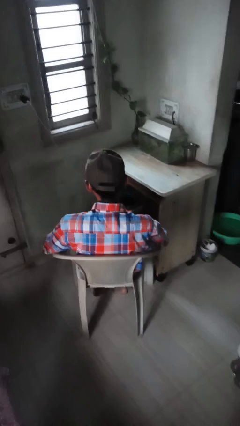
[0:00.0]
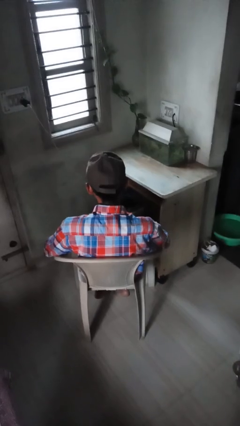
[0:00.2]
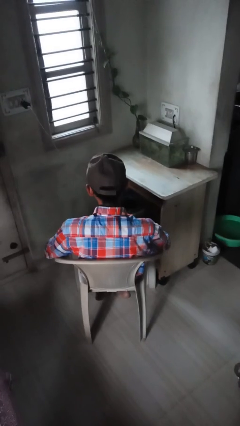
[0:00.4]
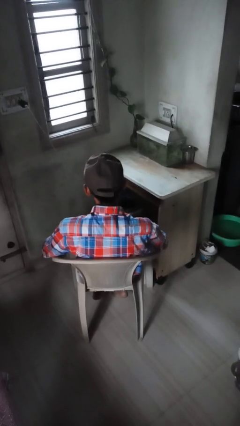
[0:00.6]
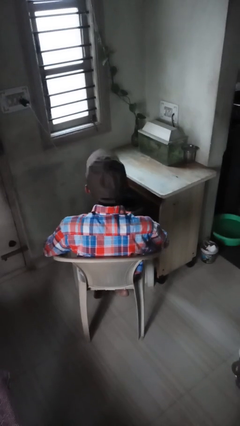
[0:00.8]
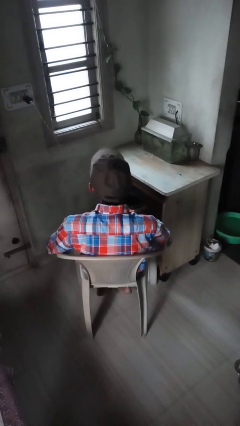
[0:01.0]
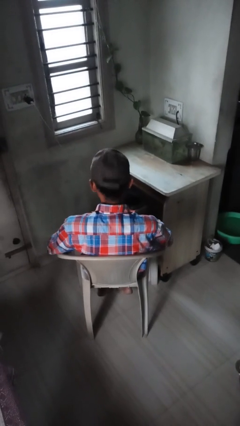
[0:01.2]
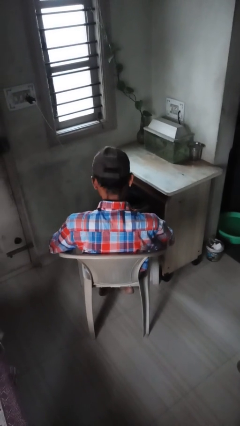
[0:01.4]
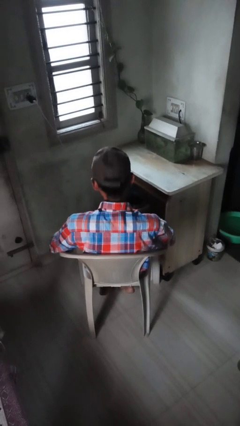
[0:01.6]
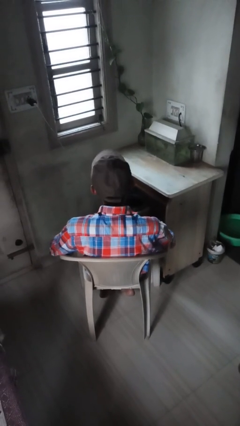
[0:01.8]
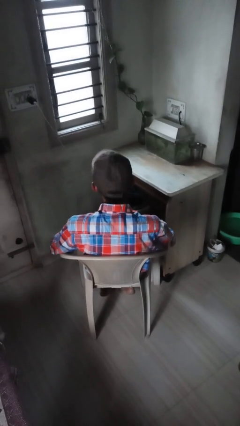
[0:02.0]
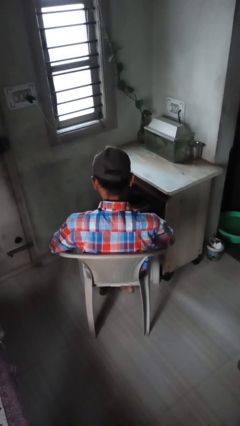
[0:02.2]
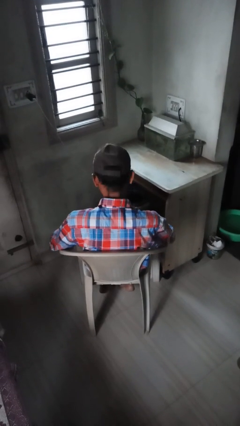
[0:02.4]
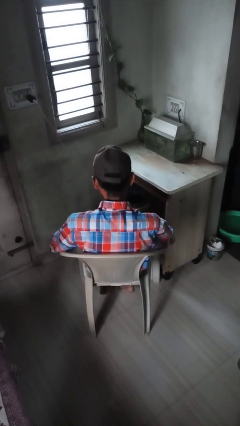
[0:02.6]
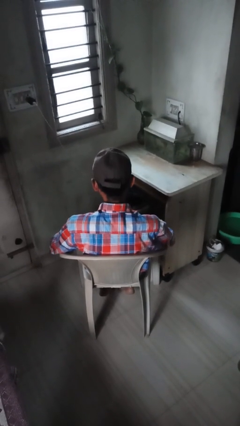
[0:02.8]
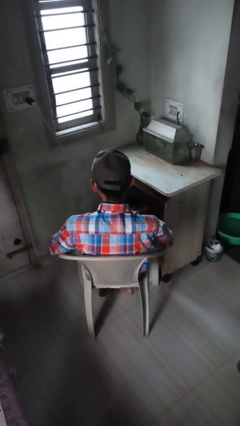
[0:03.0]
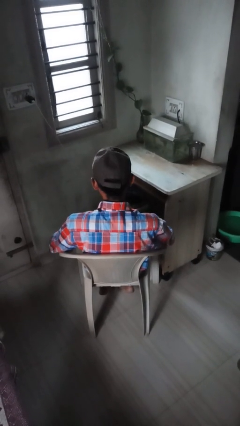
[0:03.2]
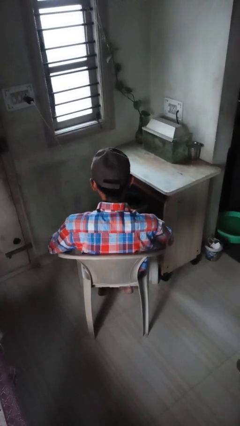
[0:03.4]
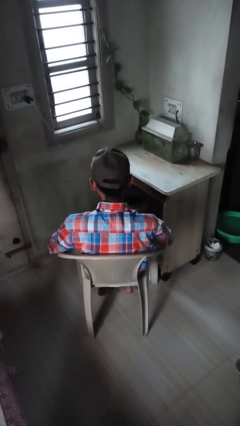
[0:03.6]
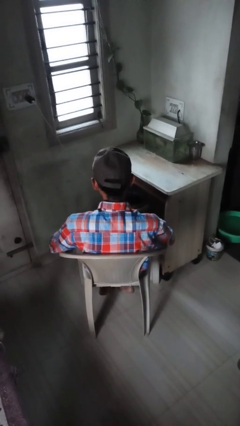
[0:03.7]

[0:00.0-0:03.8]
person nods head

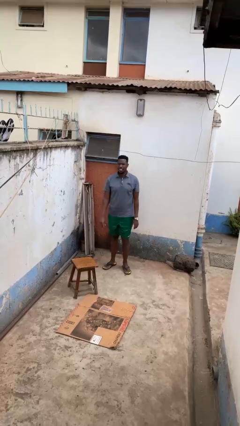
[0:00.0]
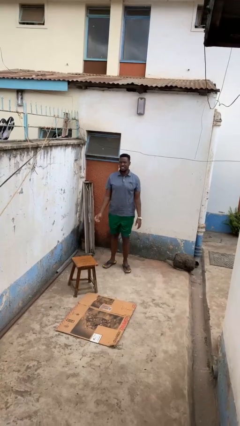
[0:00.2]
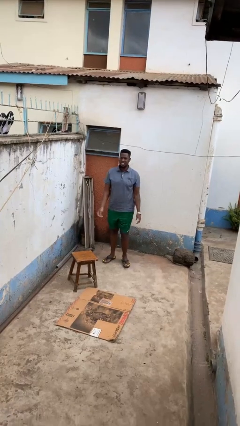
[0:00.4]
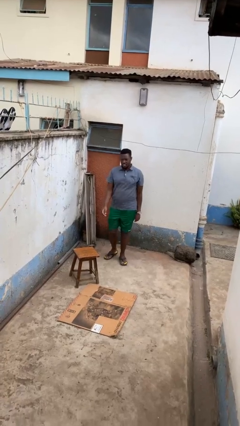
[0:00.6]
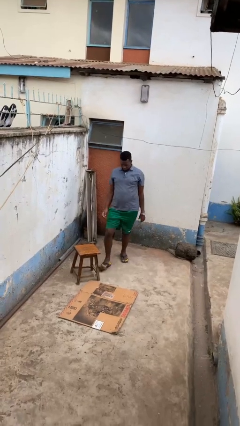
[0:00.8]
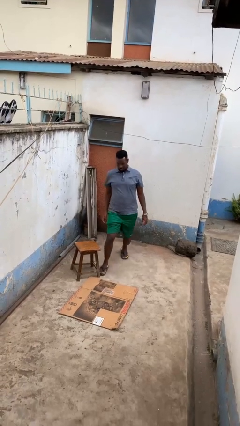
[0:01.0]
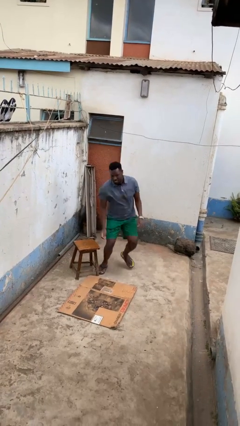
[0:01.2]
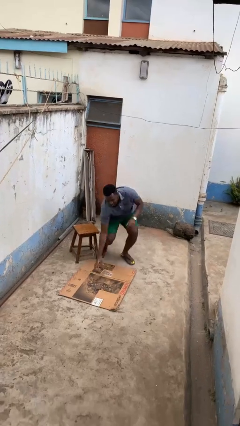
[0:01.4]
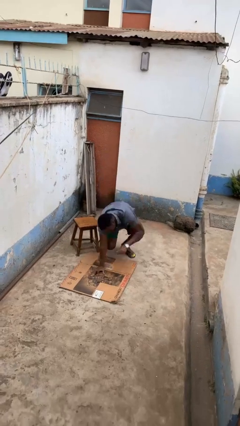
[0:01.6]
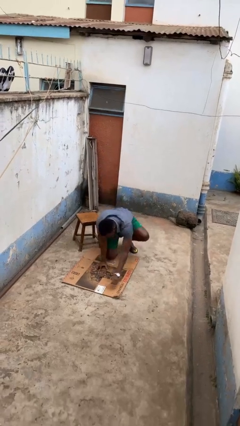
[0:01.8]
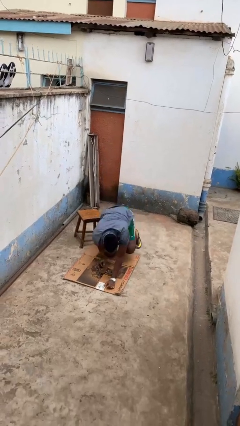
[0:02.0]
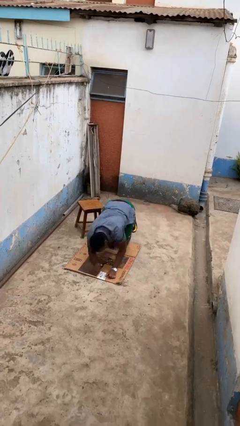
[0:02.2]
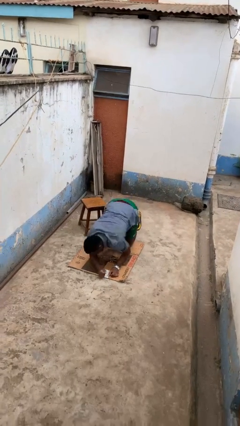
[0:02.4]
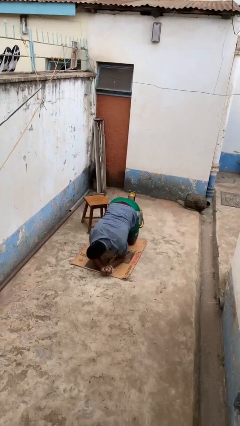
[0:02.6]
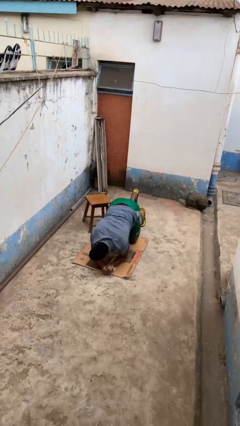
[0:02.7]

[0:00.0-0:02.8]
person trips on object on floor

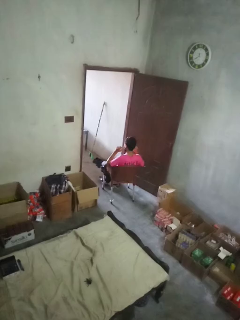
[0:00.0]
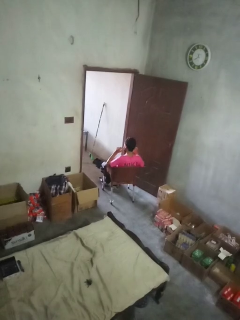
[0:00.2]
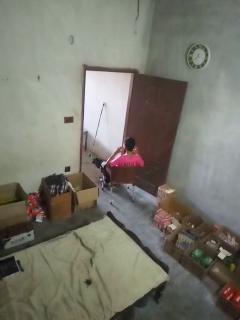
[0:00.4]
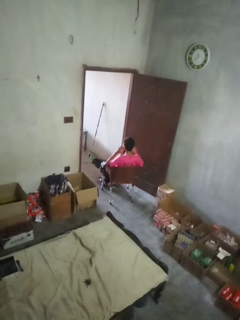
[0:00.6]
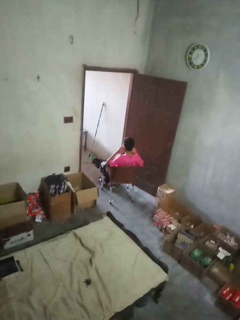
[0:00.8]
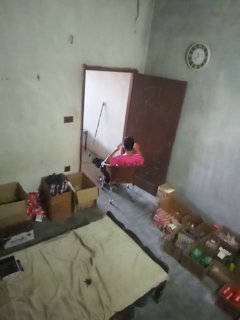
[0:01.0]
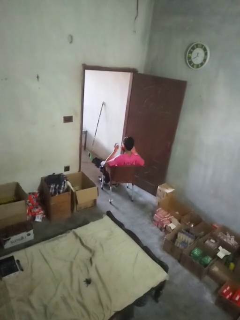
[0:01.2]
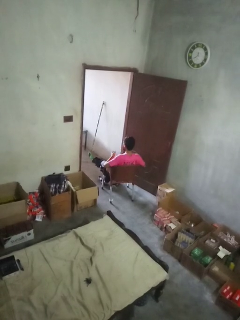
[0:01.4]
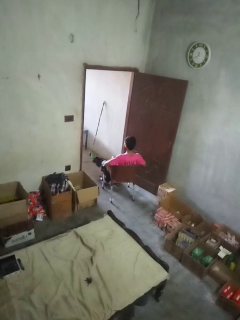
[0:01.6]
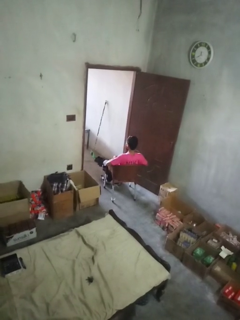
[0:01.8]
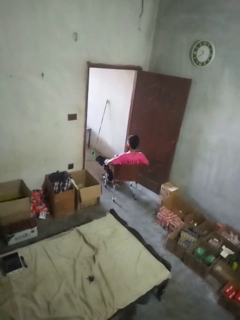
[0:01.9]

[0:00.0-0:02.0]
person takes off facemask

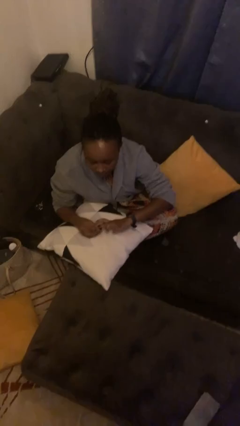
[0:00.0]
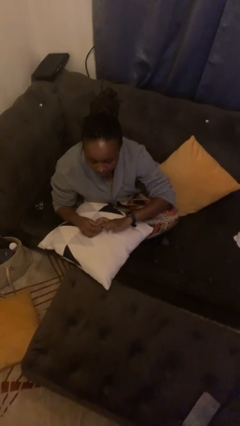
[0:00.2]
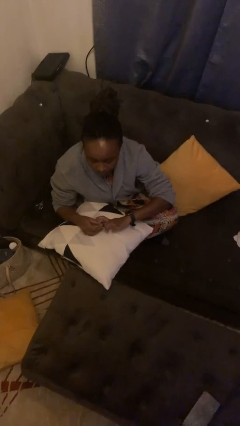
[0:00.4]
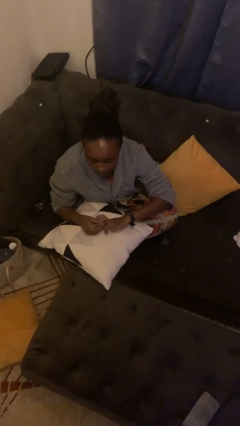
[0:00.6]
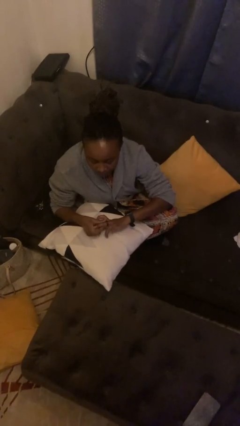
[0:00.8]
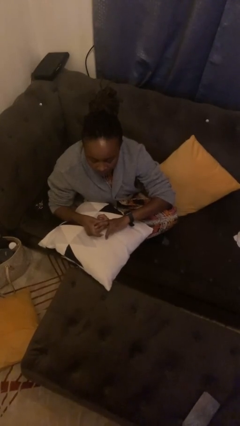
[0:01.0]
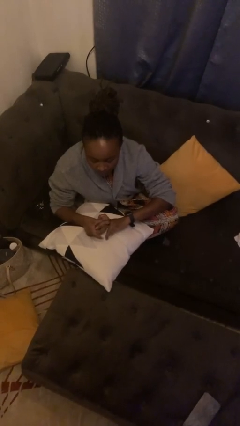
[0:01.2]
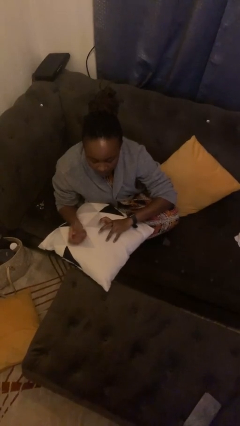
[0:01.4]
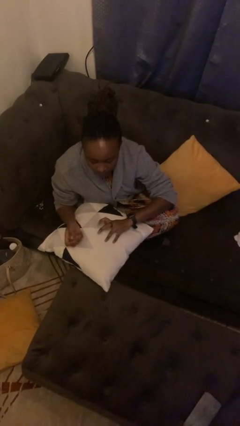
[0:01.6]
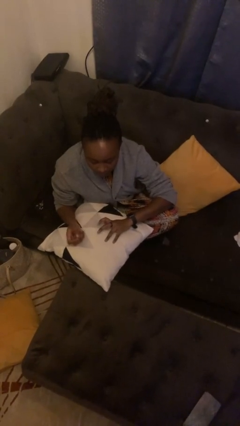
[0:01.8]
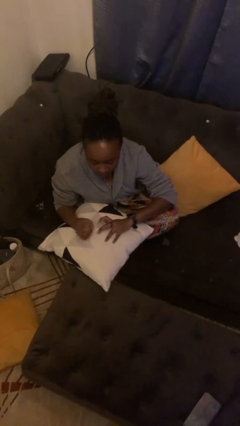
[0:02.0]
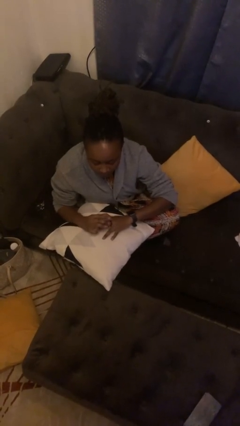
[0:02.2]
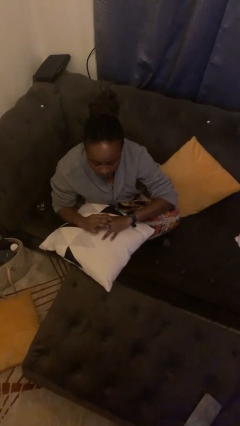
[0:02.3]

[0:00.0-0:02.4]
person puts on ring

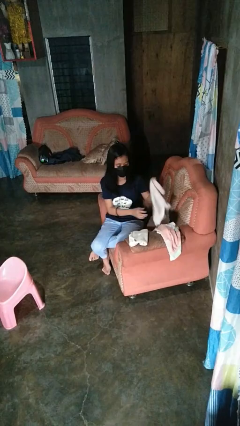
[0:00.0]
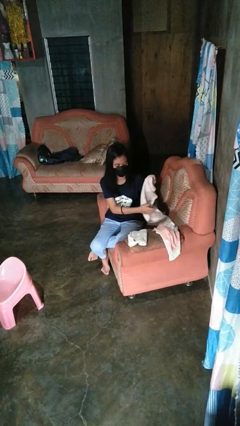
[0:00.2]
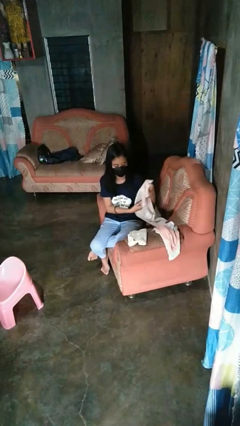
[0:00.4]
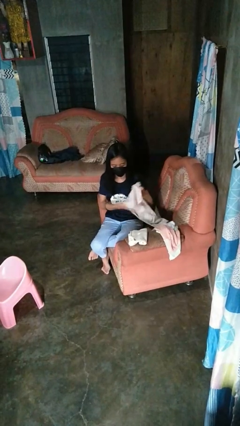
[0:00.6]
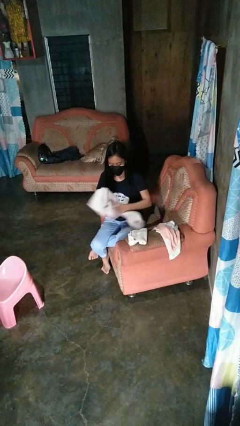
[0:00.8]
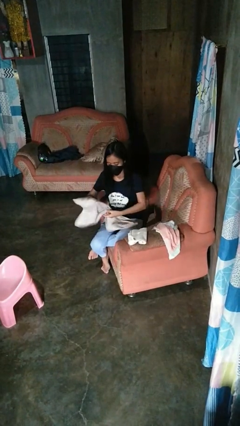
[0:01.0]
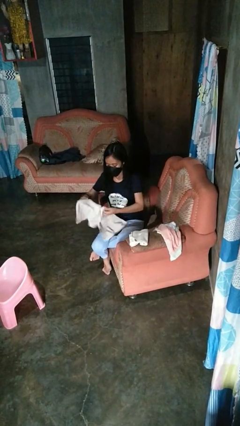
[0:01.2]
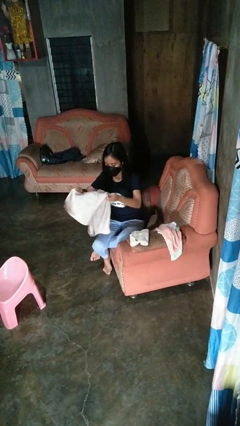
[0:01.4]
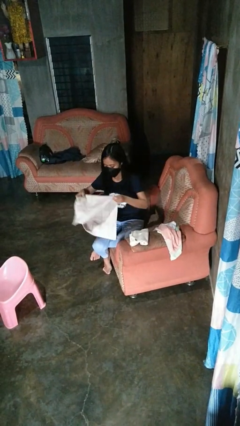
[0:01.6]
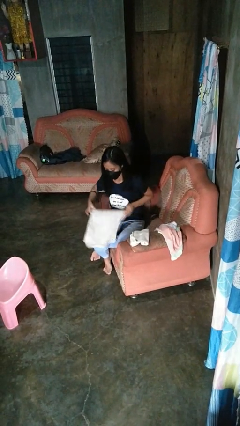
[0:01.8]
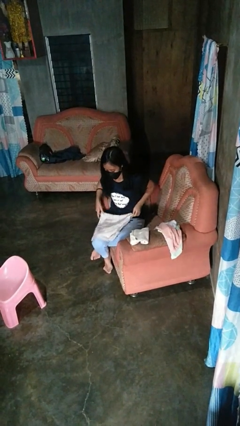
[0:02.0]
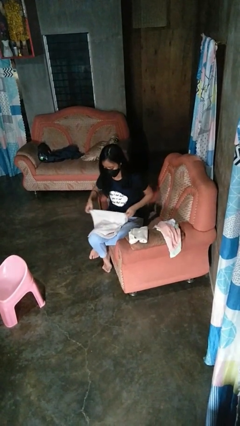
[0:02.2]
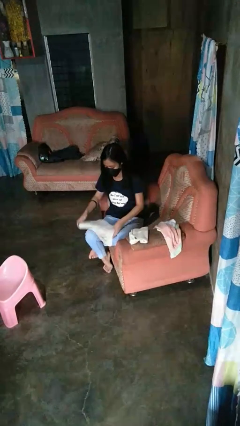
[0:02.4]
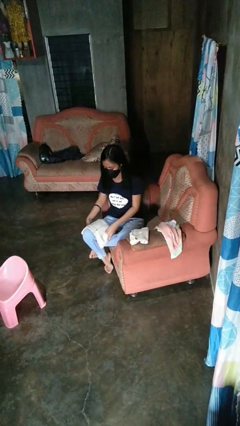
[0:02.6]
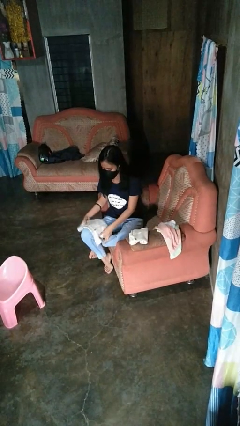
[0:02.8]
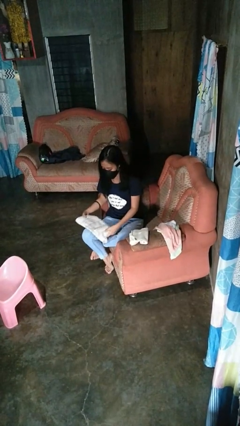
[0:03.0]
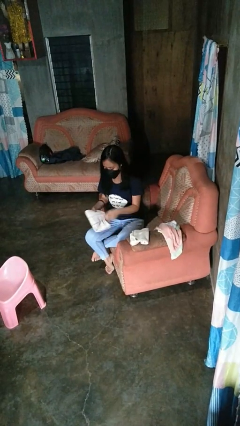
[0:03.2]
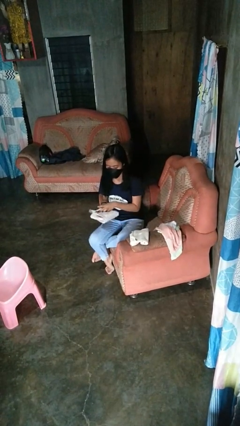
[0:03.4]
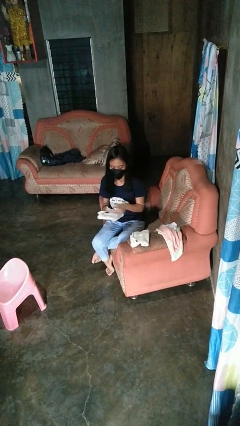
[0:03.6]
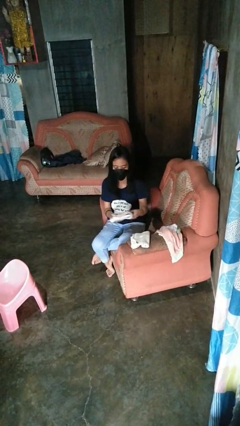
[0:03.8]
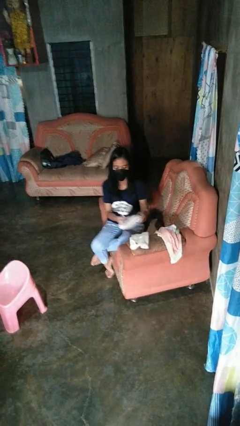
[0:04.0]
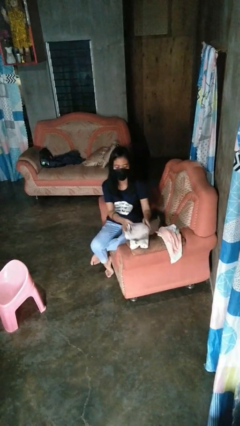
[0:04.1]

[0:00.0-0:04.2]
person folds towel

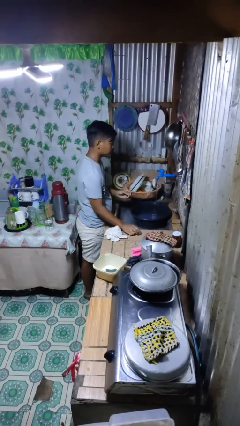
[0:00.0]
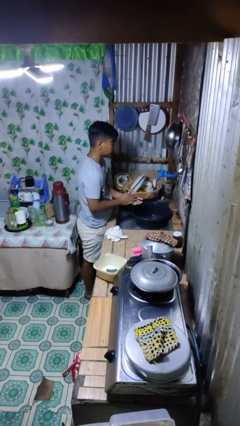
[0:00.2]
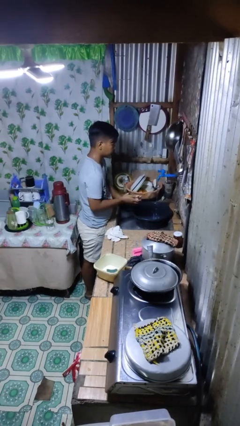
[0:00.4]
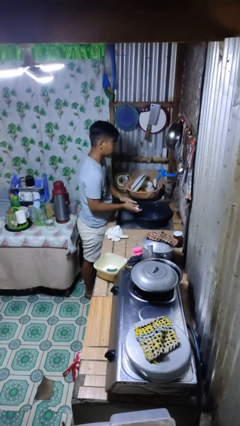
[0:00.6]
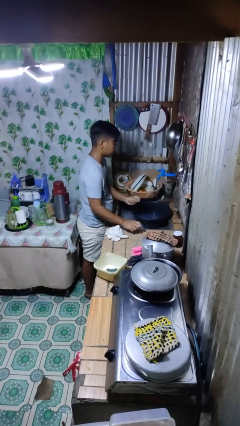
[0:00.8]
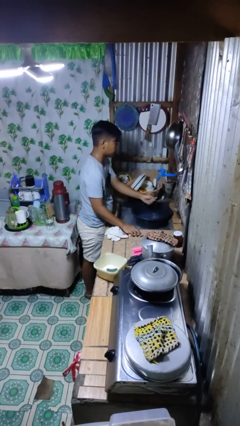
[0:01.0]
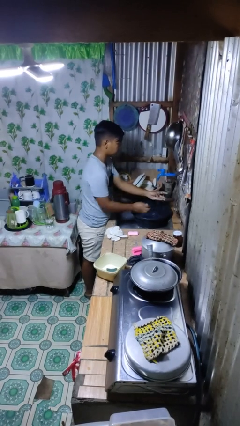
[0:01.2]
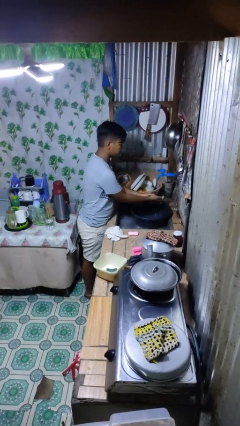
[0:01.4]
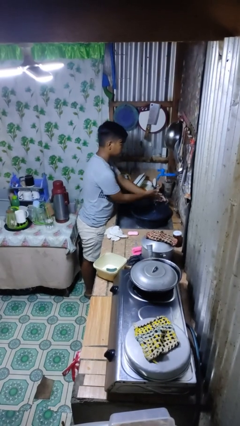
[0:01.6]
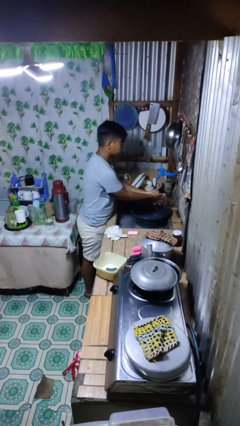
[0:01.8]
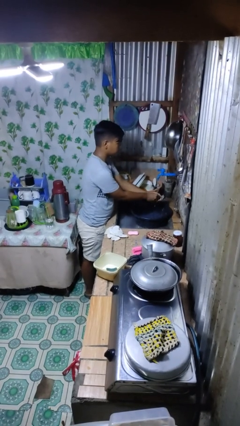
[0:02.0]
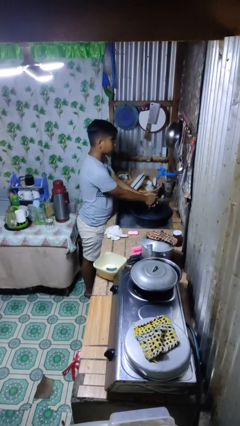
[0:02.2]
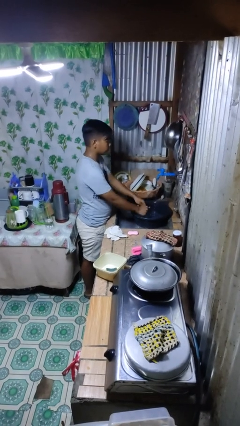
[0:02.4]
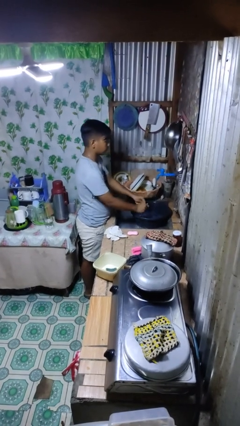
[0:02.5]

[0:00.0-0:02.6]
person washes hands
